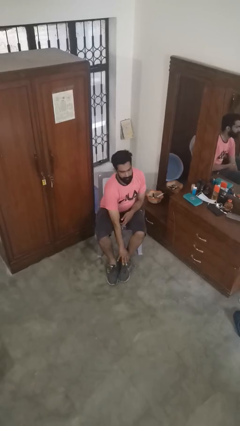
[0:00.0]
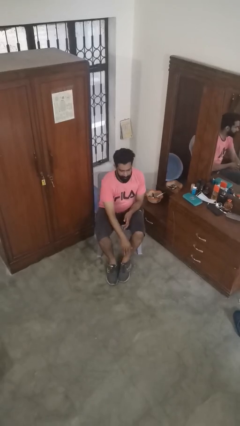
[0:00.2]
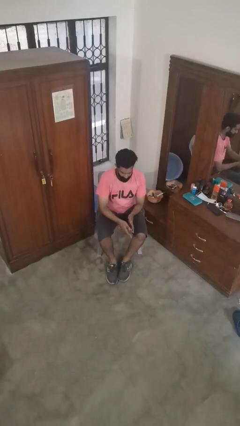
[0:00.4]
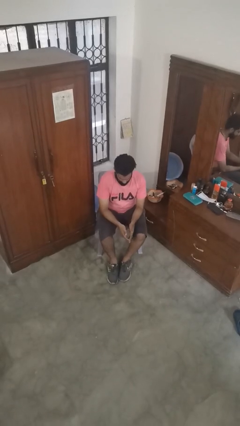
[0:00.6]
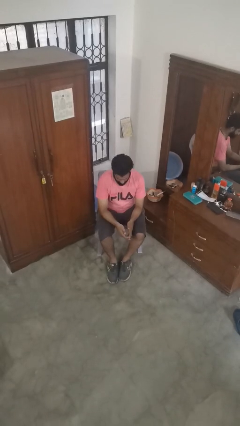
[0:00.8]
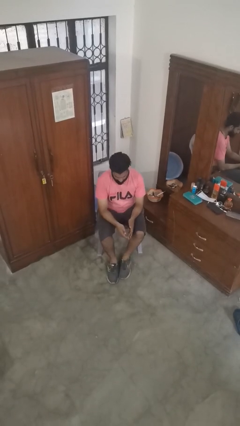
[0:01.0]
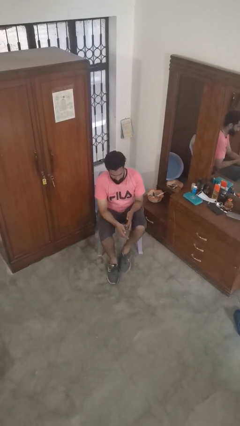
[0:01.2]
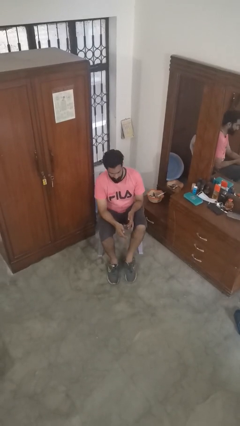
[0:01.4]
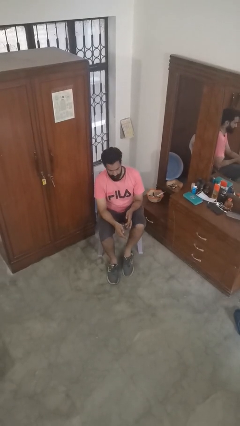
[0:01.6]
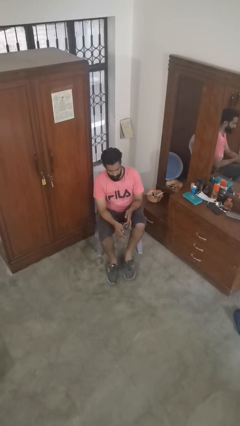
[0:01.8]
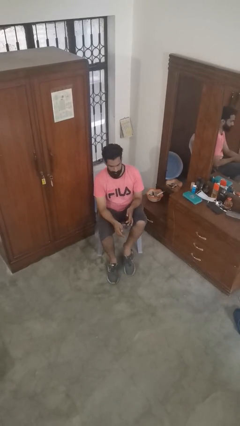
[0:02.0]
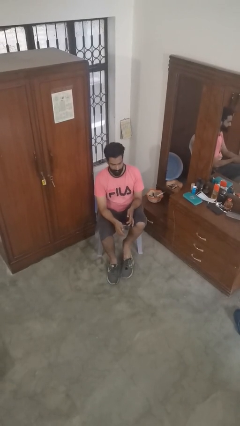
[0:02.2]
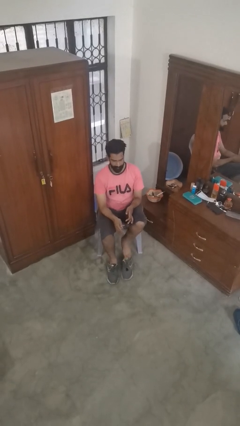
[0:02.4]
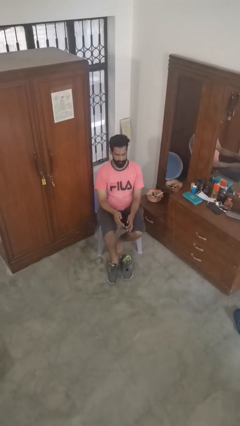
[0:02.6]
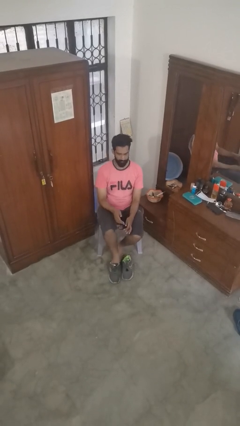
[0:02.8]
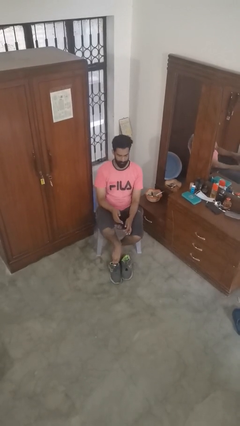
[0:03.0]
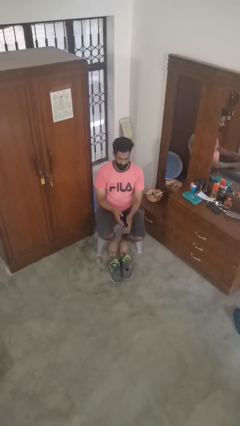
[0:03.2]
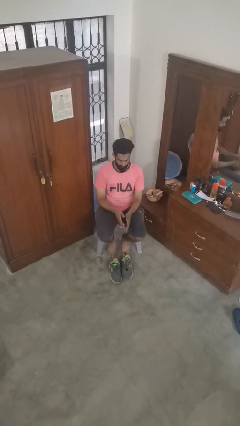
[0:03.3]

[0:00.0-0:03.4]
person takes off shoes

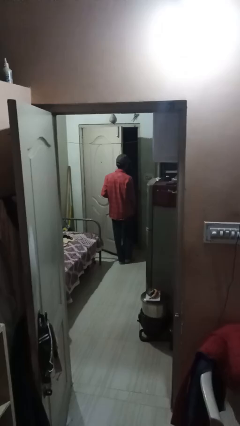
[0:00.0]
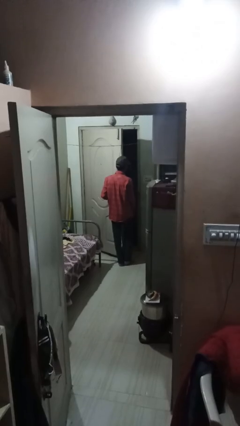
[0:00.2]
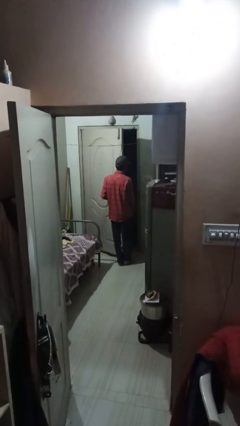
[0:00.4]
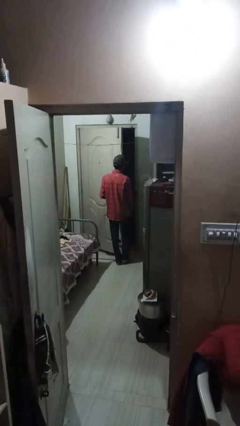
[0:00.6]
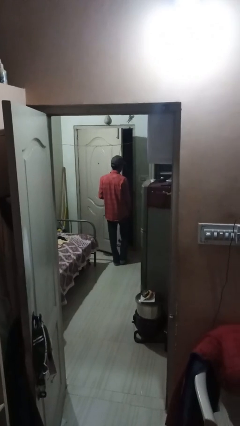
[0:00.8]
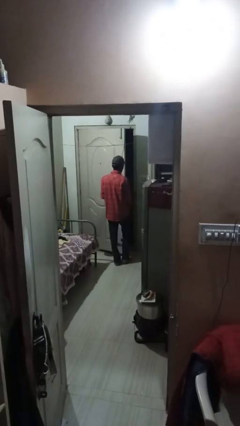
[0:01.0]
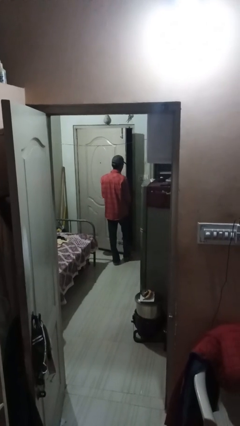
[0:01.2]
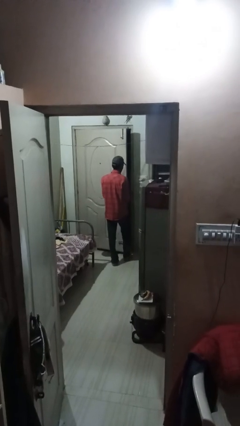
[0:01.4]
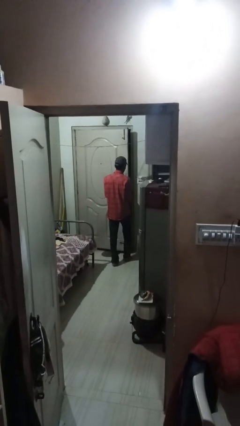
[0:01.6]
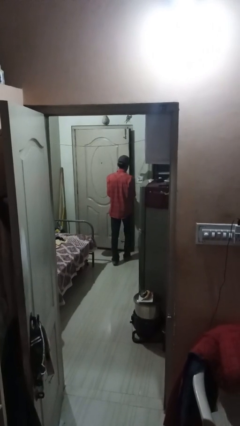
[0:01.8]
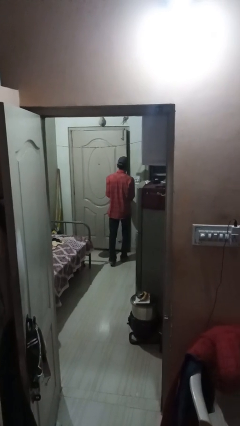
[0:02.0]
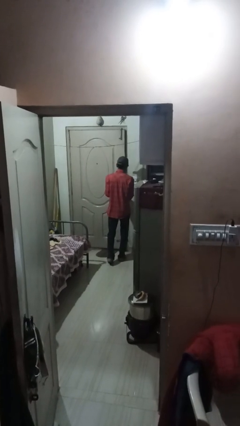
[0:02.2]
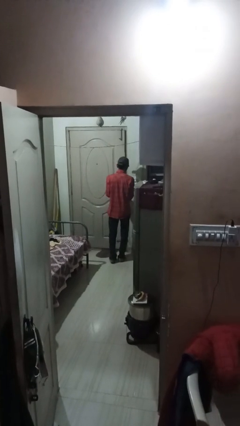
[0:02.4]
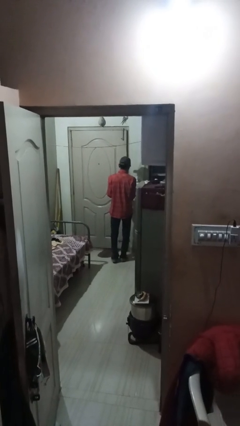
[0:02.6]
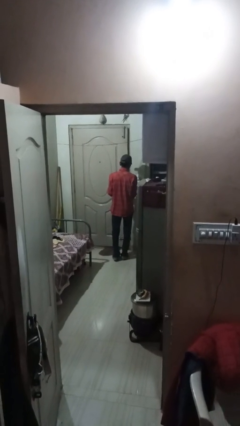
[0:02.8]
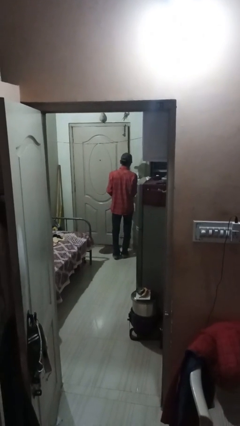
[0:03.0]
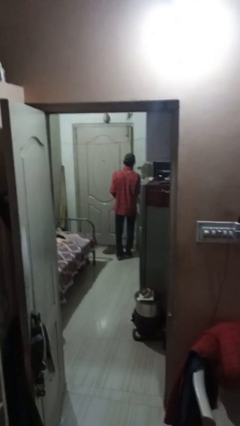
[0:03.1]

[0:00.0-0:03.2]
person closes facility door

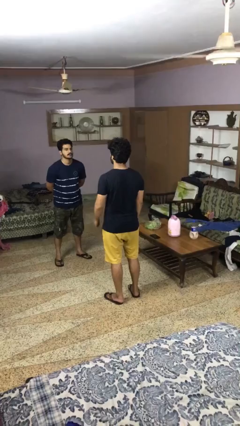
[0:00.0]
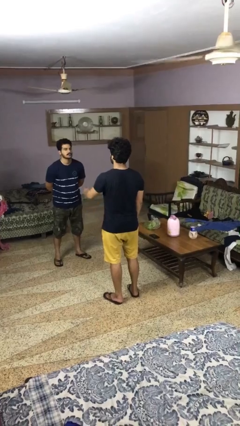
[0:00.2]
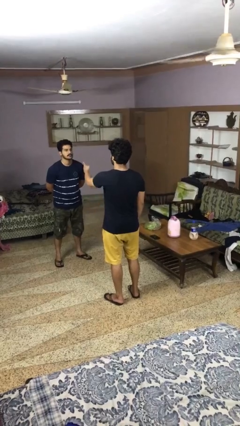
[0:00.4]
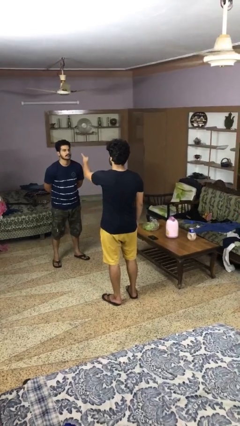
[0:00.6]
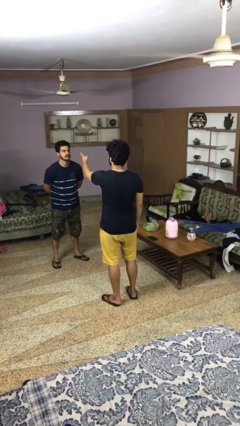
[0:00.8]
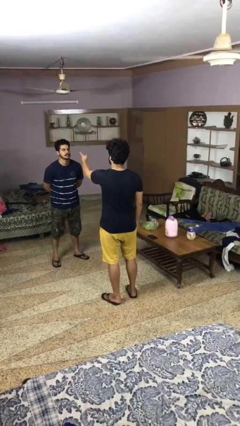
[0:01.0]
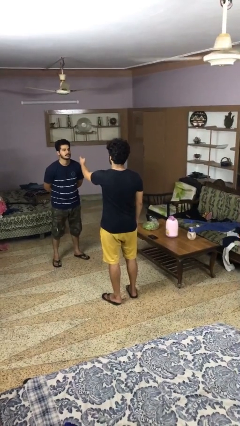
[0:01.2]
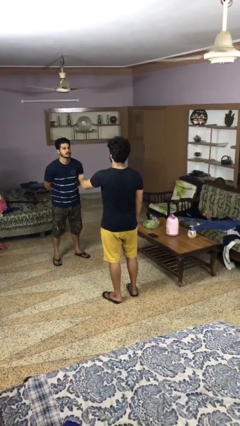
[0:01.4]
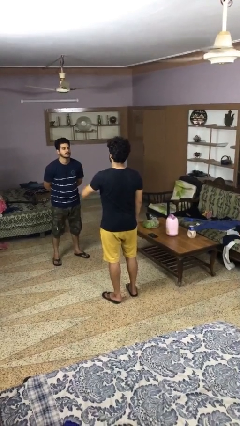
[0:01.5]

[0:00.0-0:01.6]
person points at person

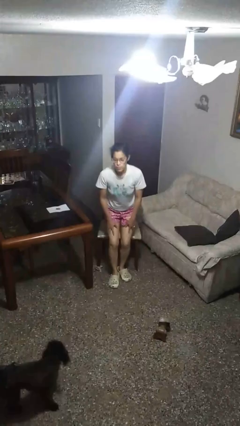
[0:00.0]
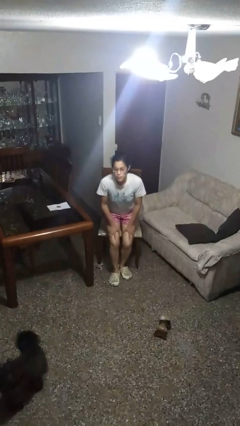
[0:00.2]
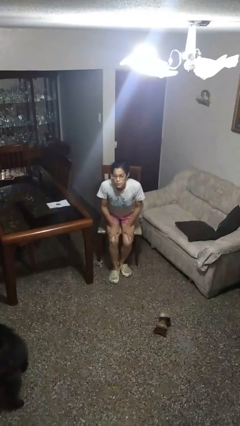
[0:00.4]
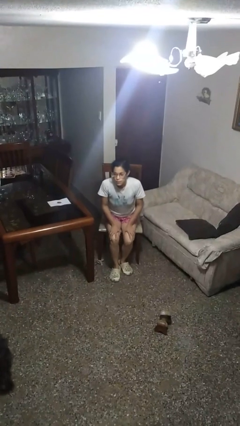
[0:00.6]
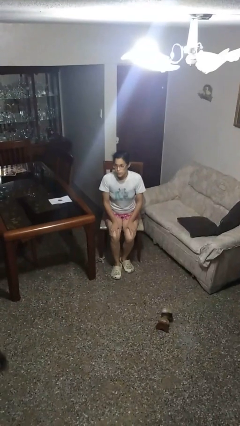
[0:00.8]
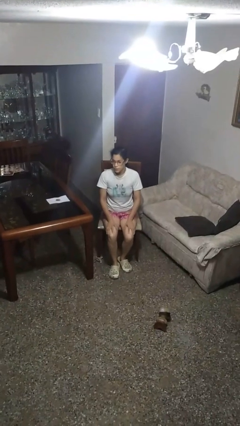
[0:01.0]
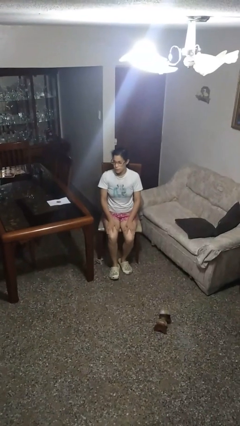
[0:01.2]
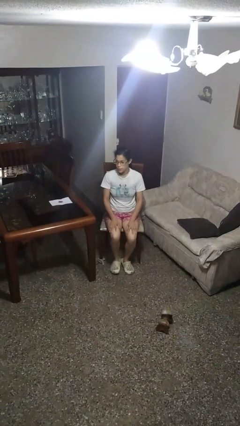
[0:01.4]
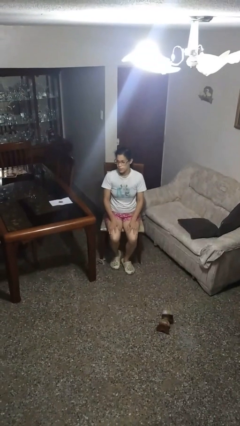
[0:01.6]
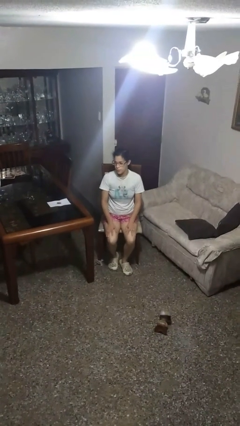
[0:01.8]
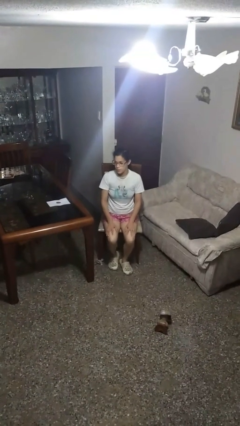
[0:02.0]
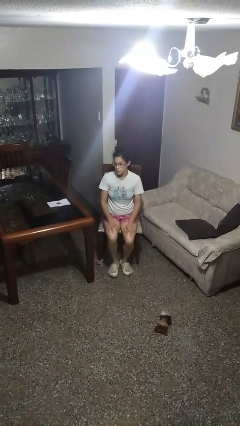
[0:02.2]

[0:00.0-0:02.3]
person sits down

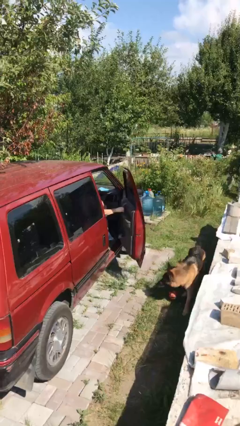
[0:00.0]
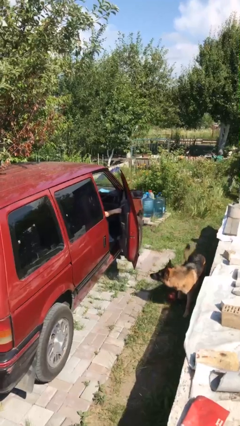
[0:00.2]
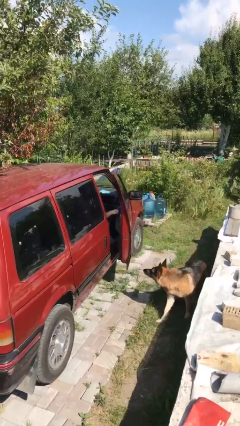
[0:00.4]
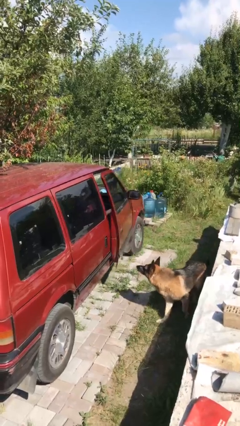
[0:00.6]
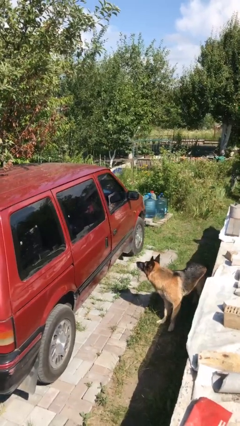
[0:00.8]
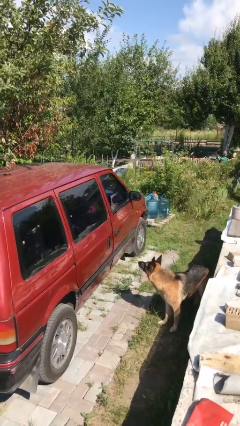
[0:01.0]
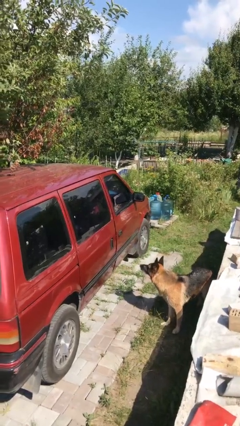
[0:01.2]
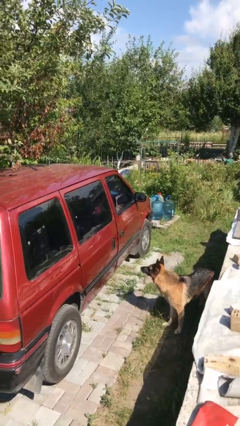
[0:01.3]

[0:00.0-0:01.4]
person closes car door

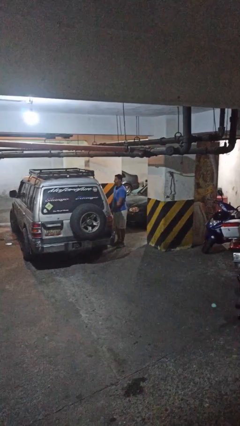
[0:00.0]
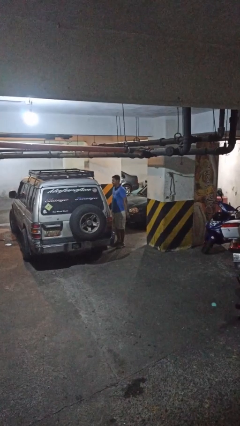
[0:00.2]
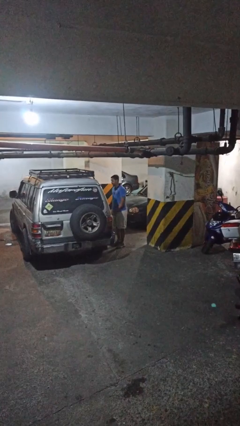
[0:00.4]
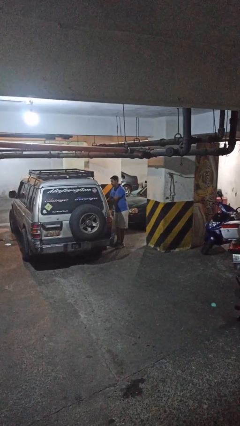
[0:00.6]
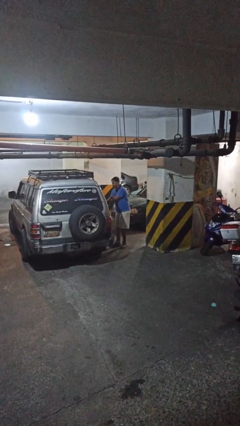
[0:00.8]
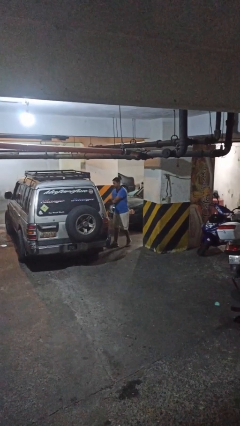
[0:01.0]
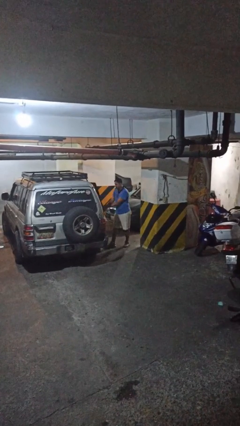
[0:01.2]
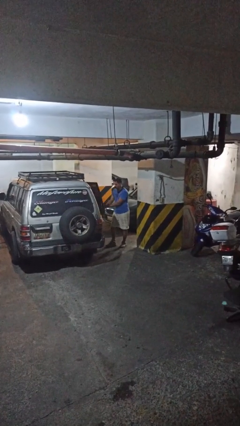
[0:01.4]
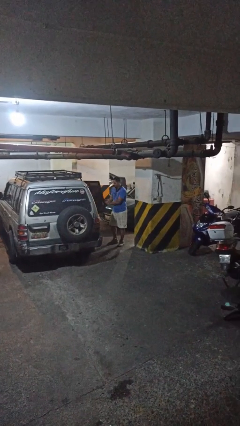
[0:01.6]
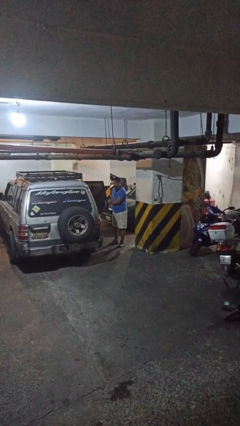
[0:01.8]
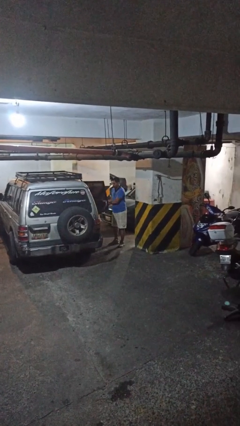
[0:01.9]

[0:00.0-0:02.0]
person opens car door

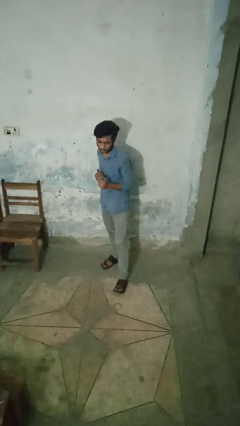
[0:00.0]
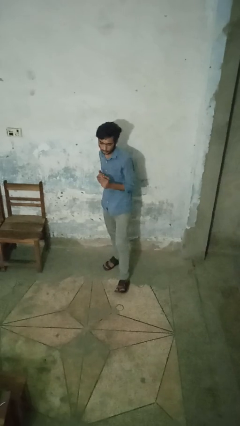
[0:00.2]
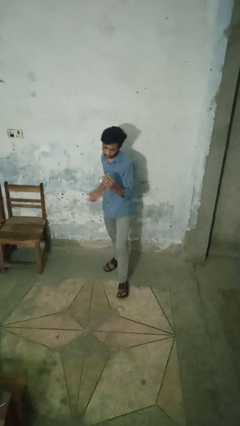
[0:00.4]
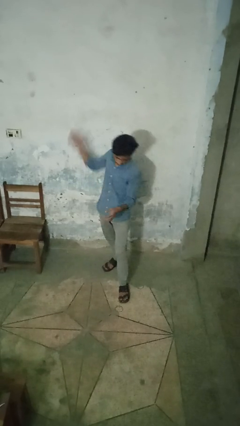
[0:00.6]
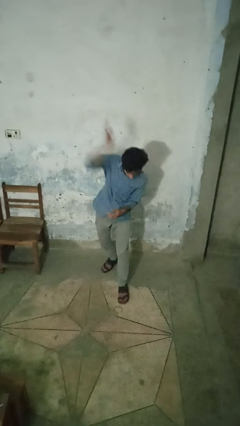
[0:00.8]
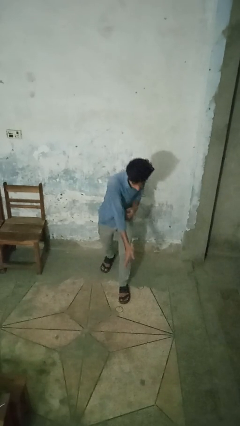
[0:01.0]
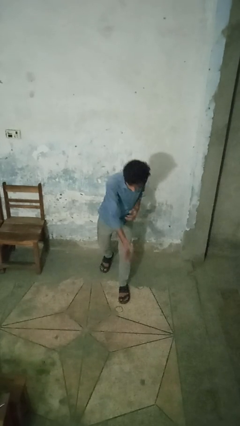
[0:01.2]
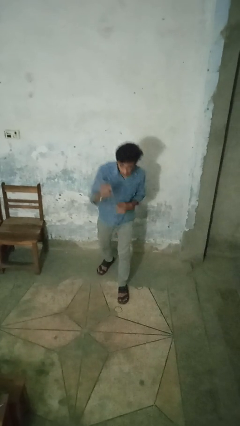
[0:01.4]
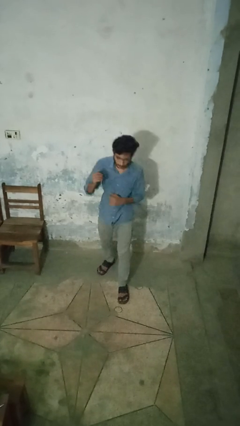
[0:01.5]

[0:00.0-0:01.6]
person karate chop

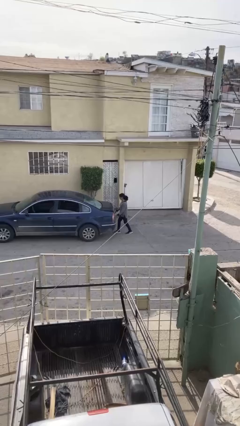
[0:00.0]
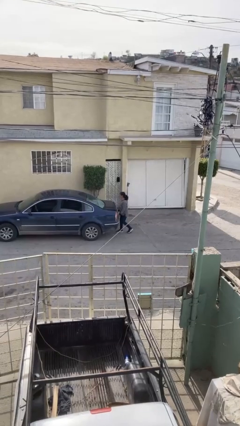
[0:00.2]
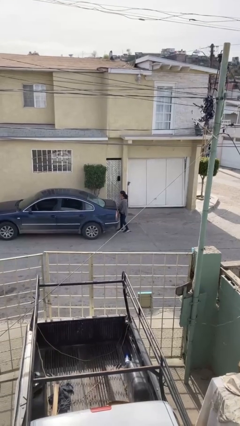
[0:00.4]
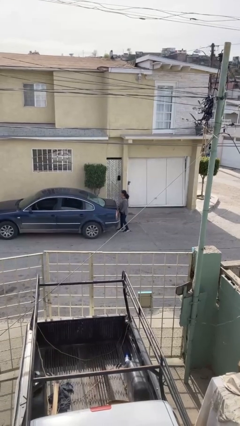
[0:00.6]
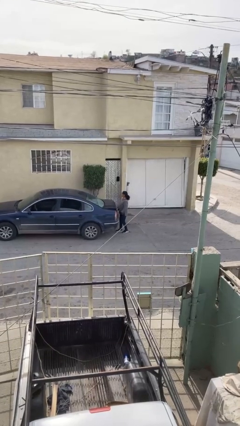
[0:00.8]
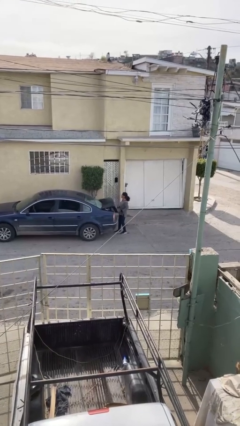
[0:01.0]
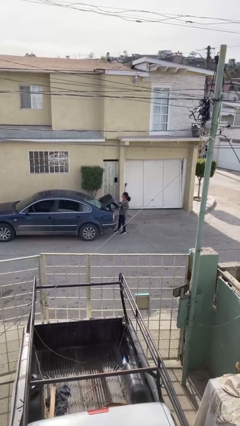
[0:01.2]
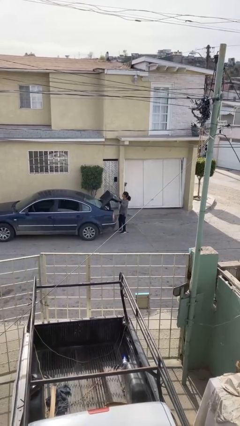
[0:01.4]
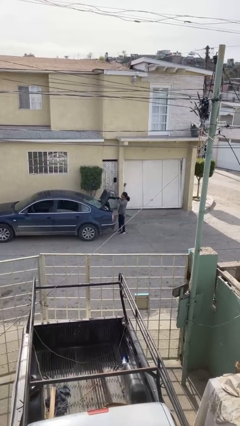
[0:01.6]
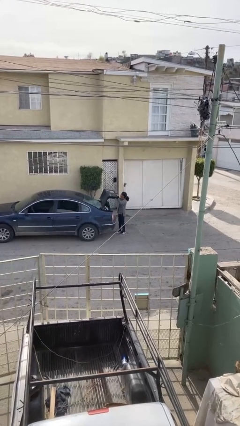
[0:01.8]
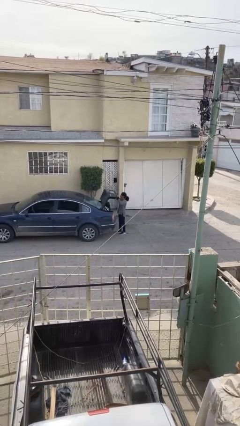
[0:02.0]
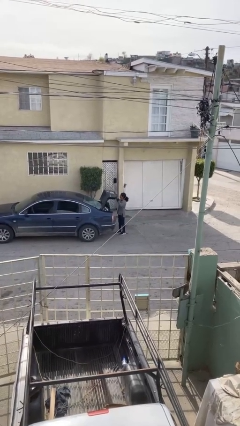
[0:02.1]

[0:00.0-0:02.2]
person opens car trunk
